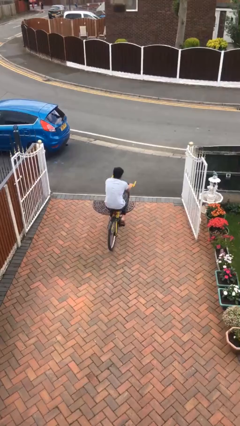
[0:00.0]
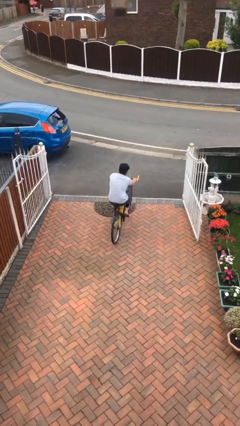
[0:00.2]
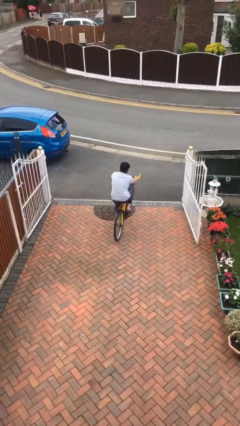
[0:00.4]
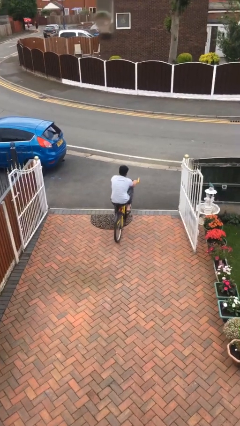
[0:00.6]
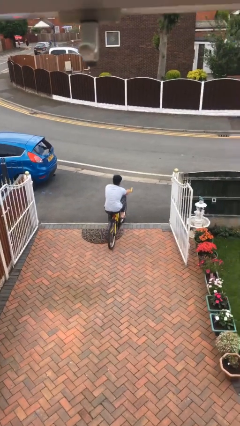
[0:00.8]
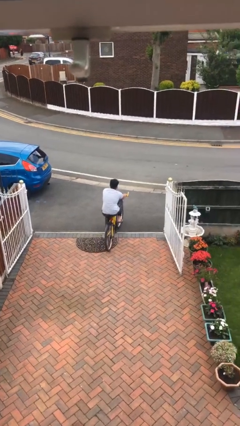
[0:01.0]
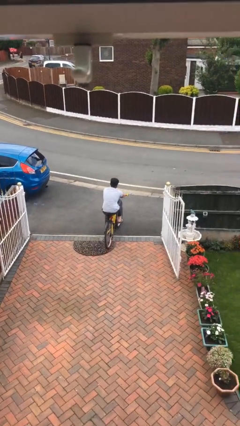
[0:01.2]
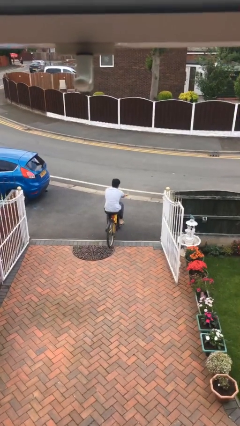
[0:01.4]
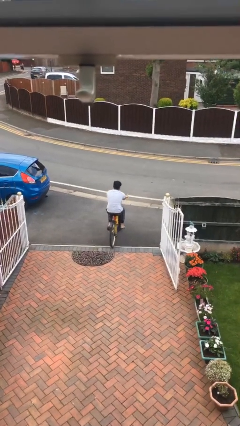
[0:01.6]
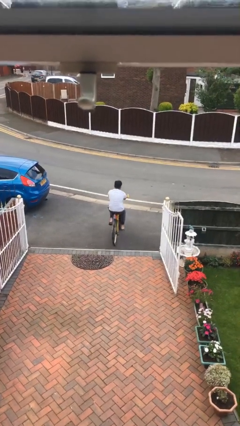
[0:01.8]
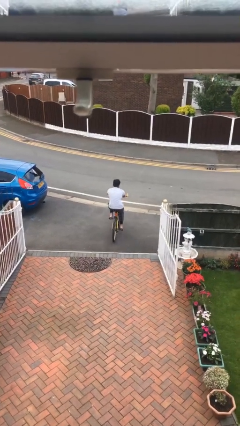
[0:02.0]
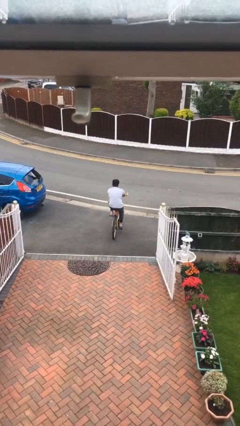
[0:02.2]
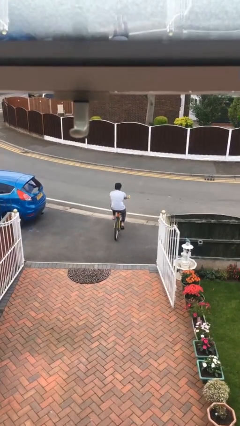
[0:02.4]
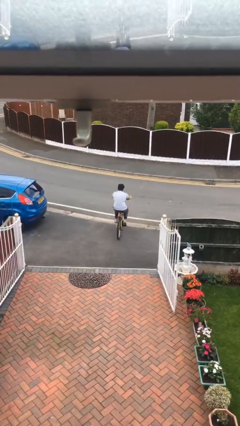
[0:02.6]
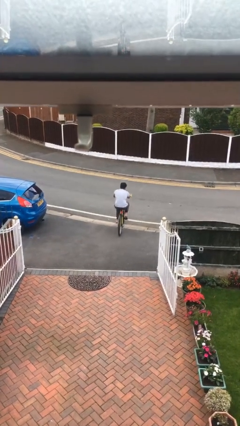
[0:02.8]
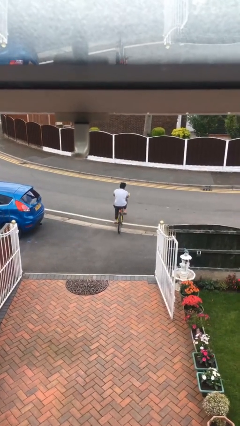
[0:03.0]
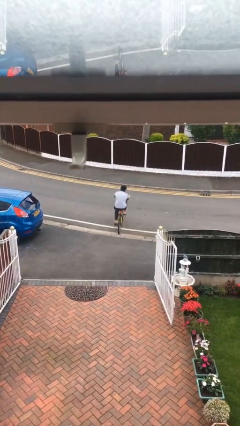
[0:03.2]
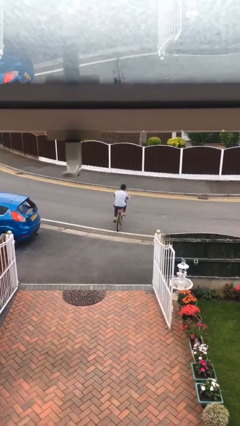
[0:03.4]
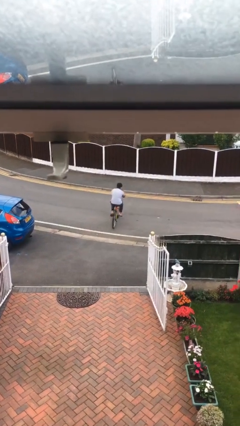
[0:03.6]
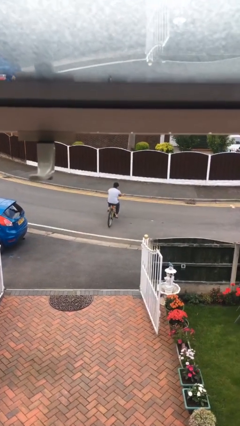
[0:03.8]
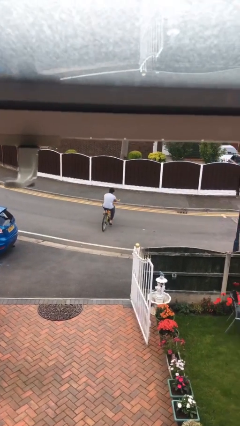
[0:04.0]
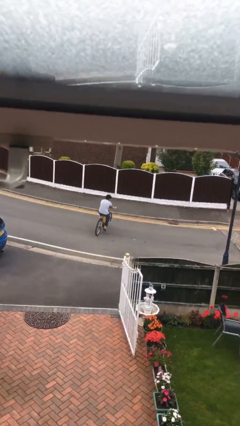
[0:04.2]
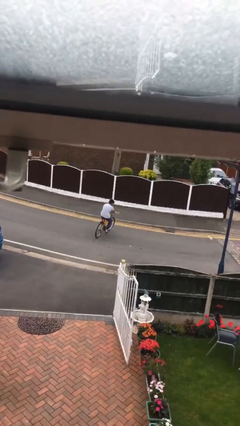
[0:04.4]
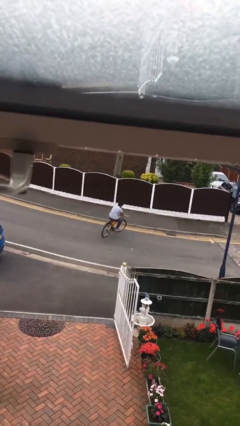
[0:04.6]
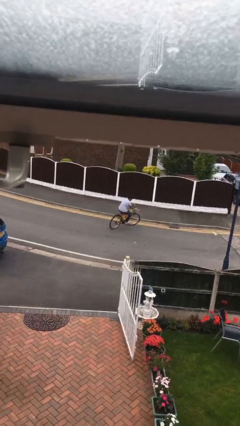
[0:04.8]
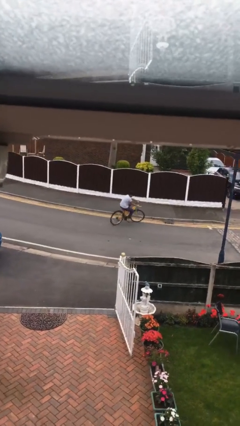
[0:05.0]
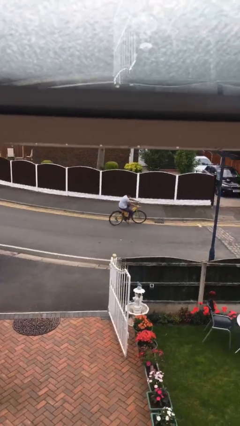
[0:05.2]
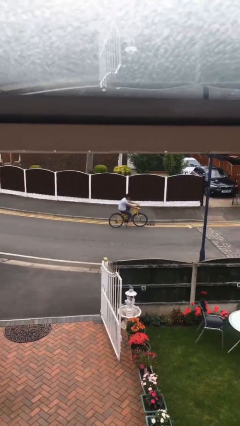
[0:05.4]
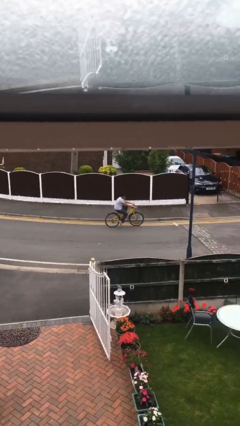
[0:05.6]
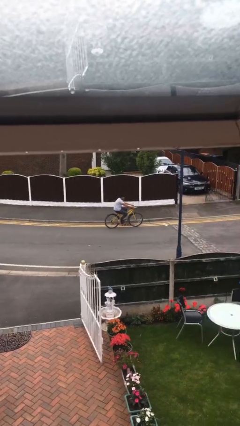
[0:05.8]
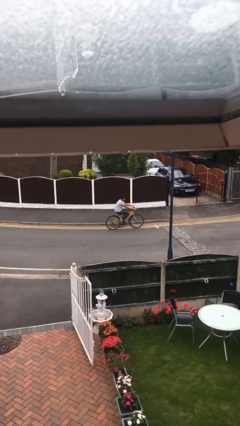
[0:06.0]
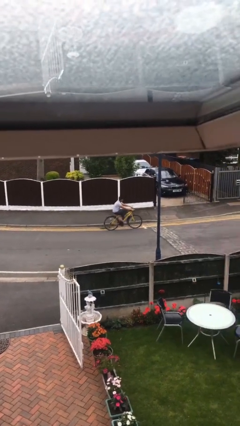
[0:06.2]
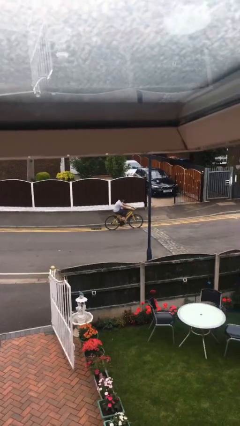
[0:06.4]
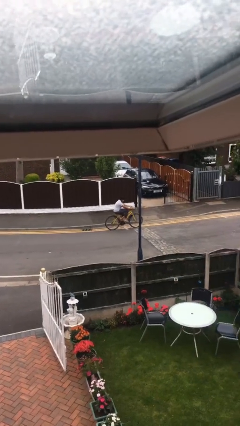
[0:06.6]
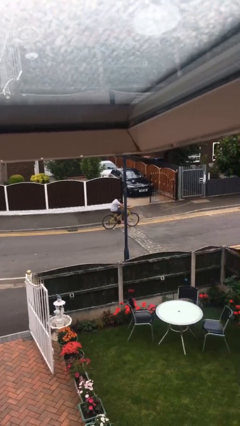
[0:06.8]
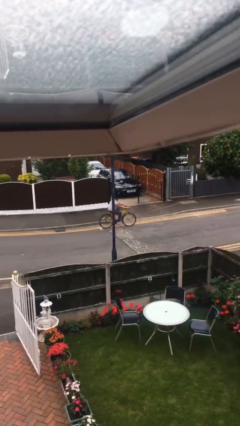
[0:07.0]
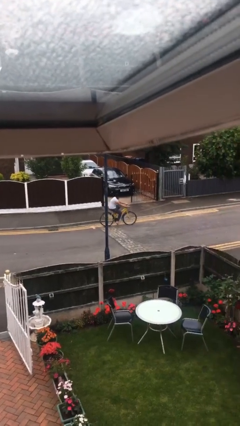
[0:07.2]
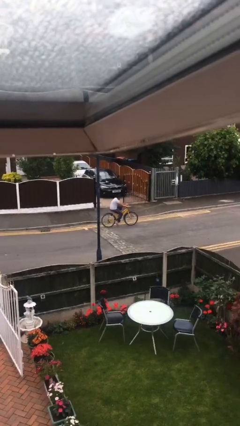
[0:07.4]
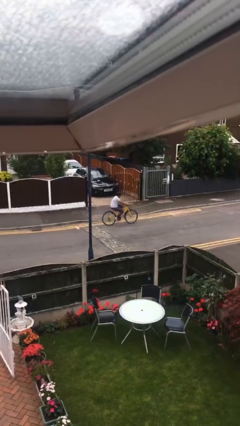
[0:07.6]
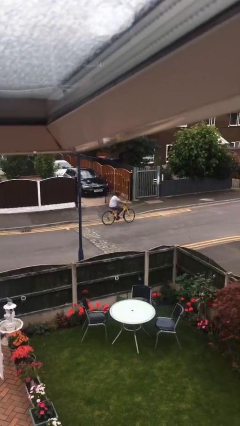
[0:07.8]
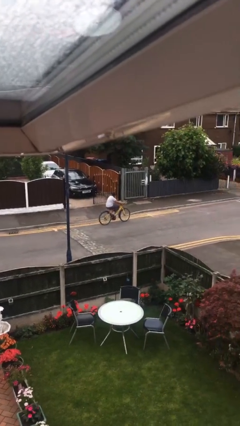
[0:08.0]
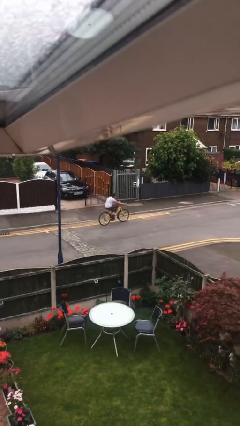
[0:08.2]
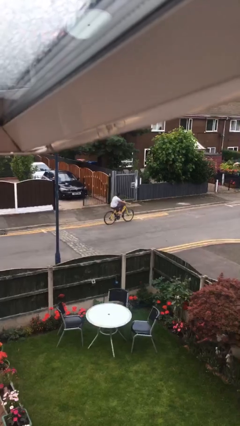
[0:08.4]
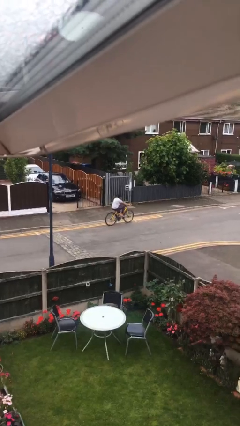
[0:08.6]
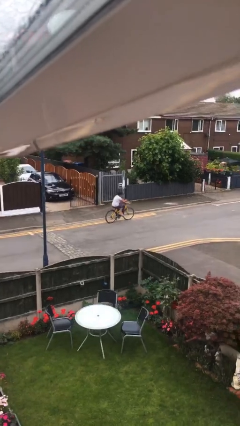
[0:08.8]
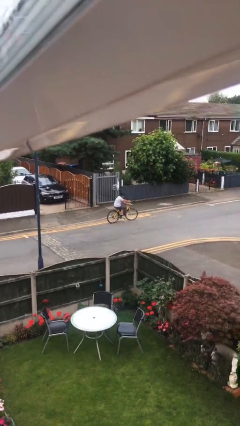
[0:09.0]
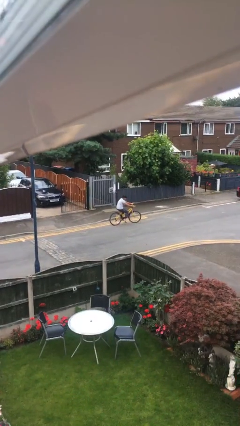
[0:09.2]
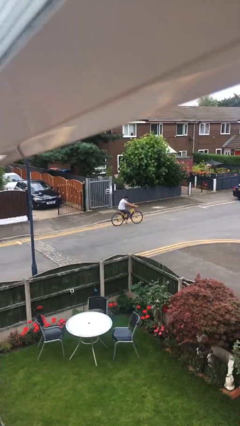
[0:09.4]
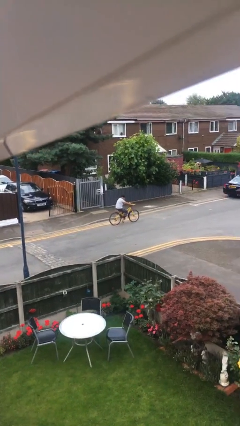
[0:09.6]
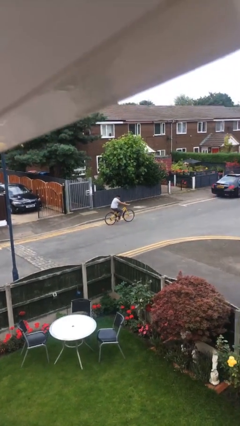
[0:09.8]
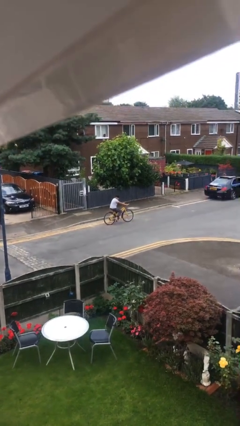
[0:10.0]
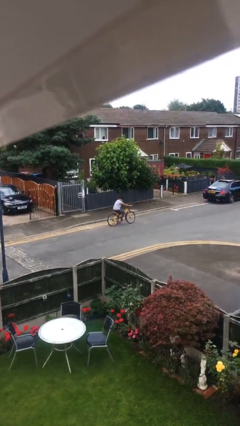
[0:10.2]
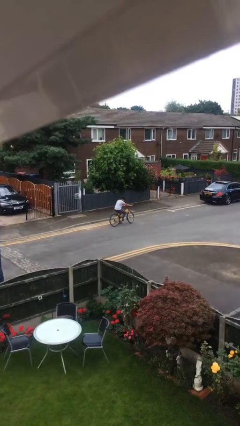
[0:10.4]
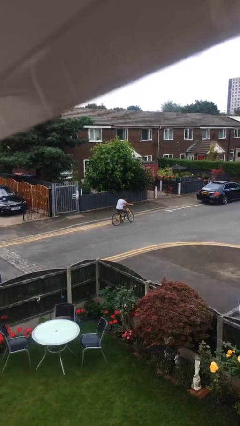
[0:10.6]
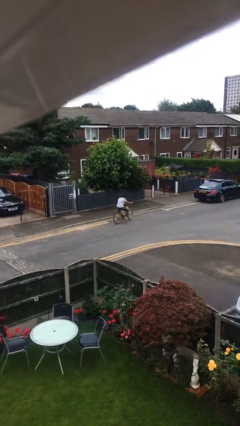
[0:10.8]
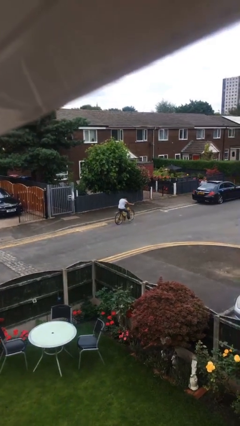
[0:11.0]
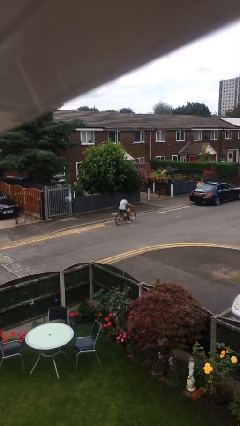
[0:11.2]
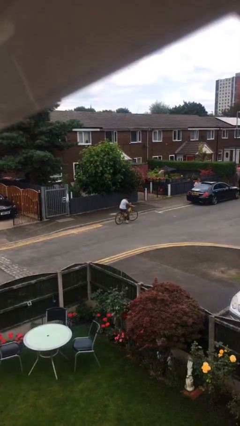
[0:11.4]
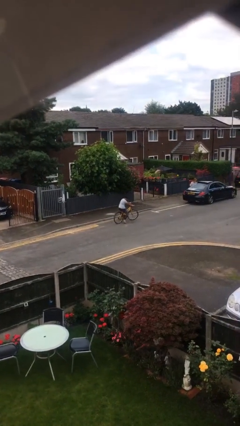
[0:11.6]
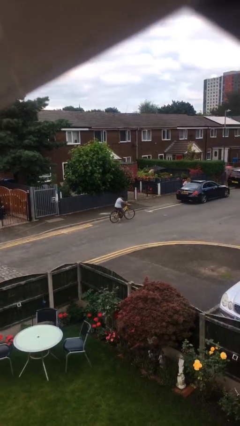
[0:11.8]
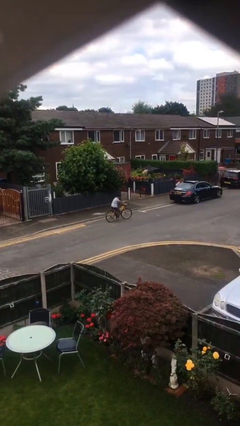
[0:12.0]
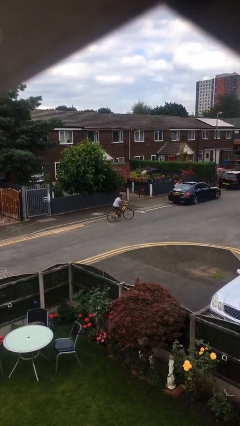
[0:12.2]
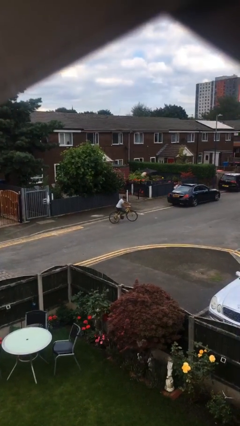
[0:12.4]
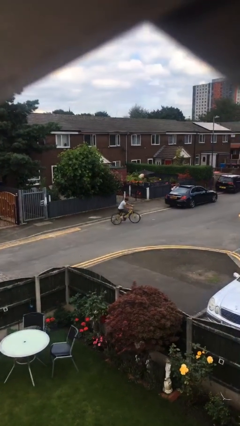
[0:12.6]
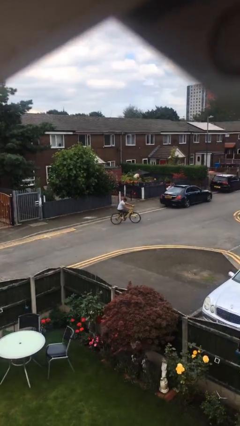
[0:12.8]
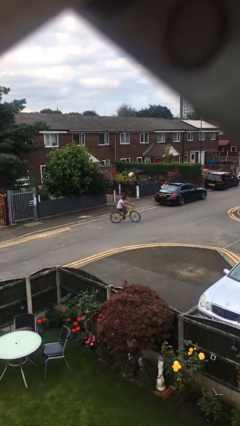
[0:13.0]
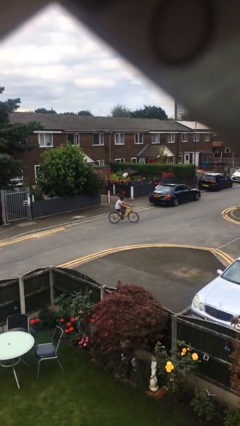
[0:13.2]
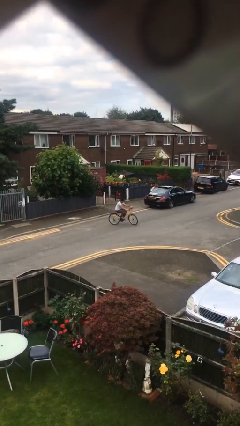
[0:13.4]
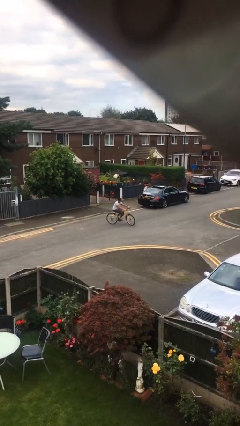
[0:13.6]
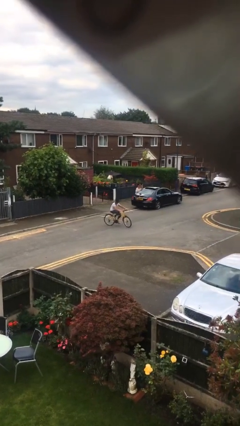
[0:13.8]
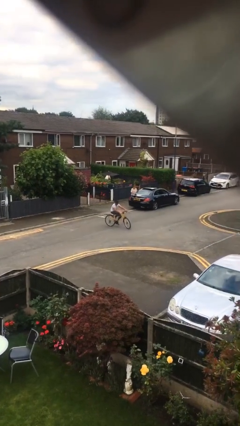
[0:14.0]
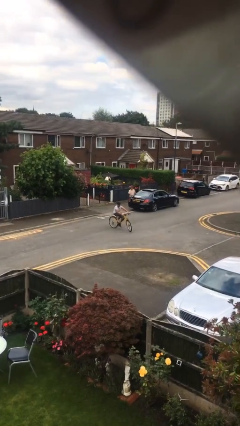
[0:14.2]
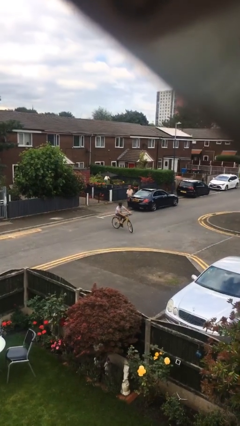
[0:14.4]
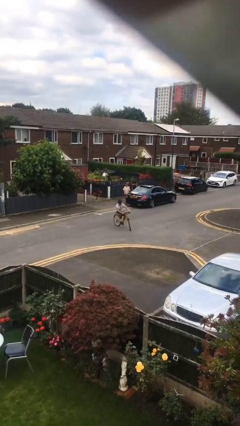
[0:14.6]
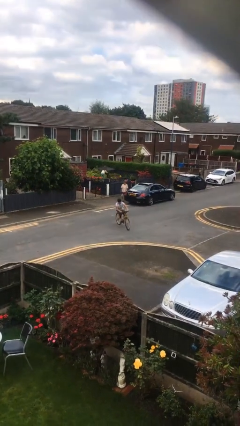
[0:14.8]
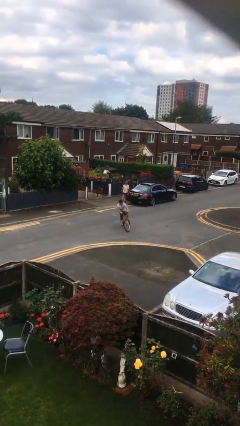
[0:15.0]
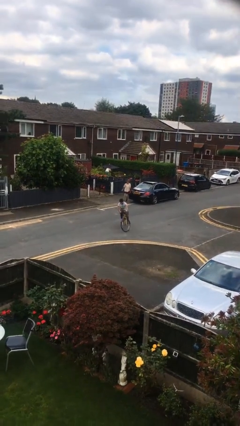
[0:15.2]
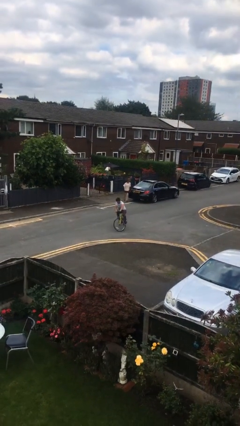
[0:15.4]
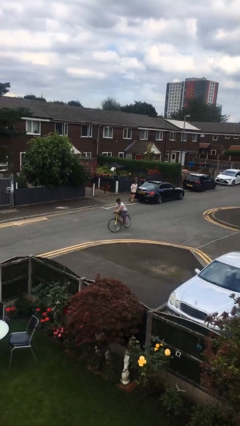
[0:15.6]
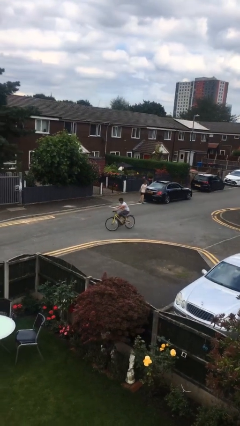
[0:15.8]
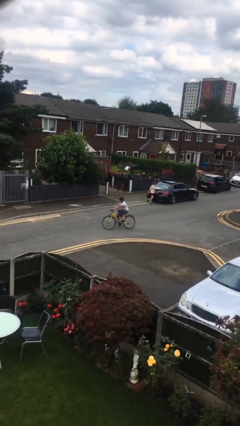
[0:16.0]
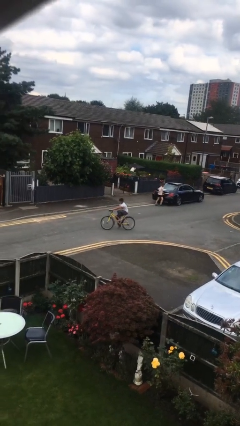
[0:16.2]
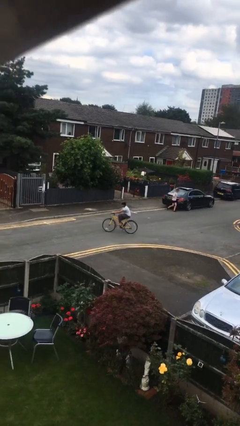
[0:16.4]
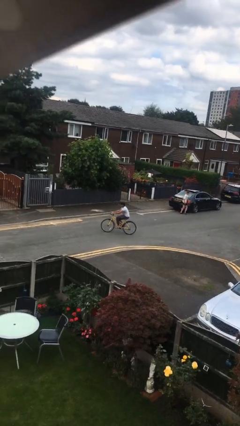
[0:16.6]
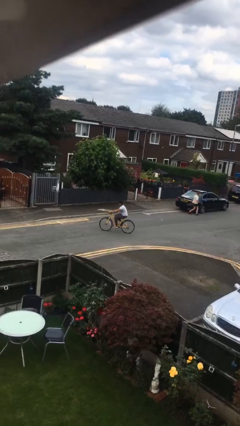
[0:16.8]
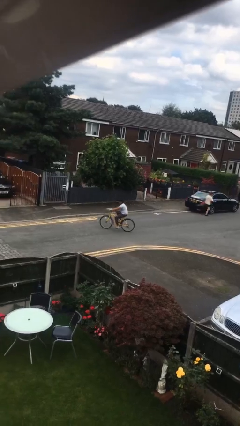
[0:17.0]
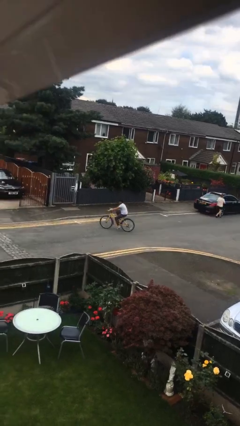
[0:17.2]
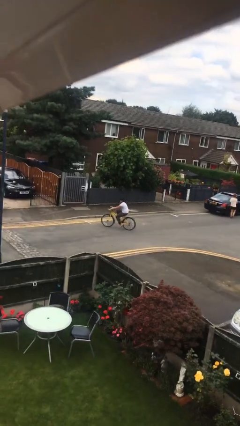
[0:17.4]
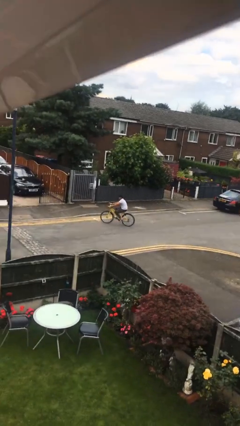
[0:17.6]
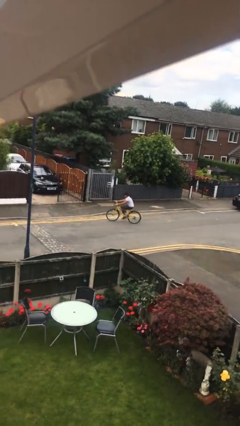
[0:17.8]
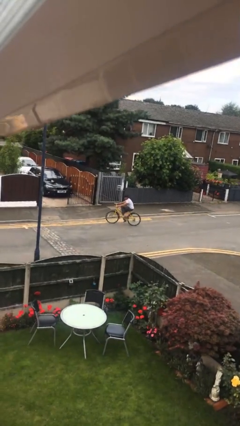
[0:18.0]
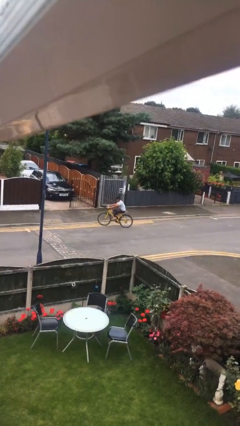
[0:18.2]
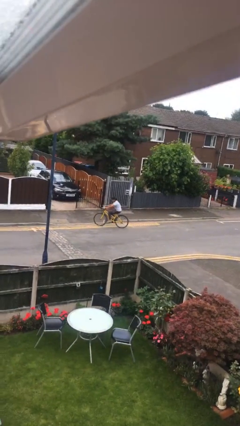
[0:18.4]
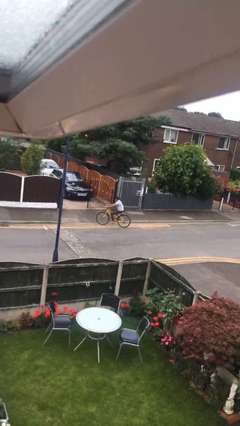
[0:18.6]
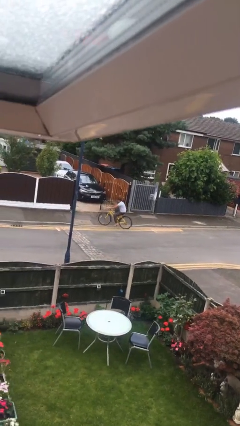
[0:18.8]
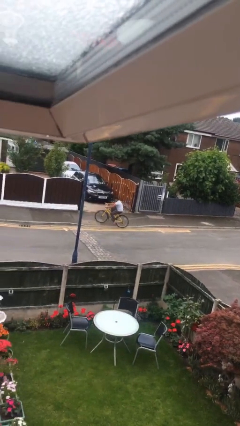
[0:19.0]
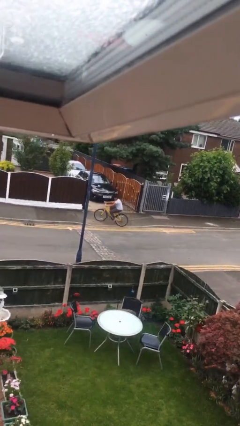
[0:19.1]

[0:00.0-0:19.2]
person rides bicycle
